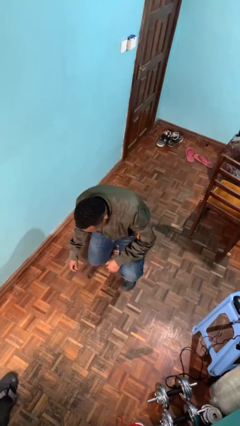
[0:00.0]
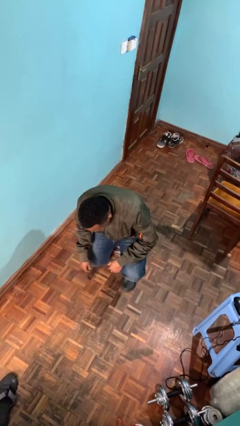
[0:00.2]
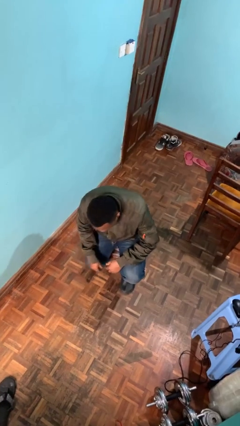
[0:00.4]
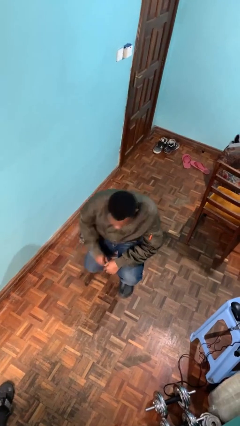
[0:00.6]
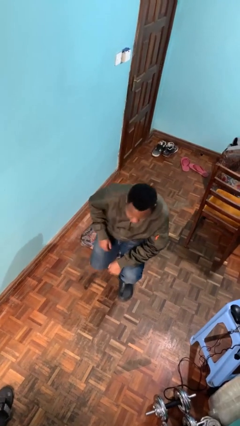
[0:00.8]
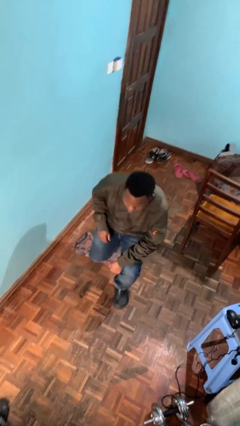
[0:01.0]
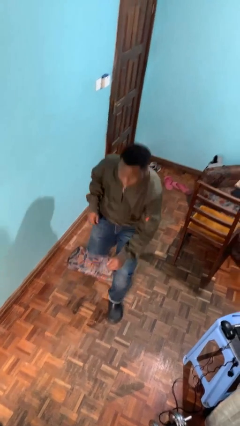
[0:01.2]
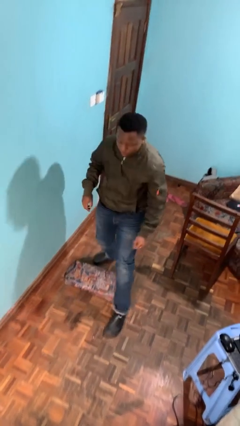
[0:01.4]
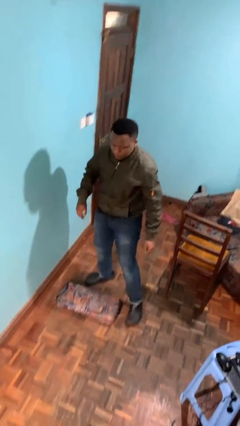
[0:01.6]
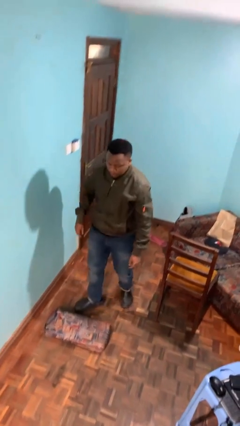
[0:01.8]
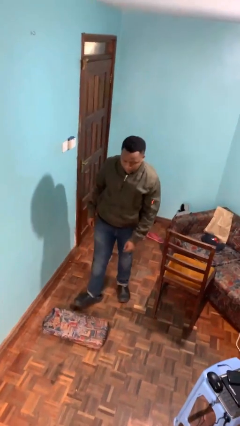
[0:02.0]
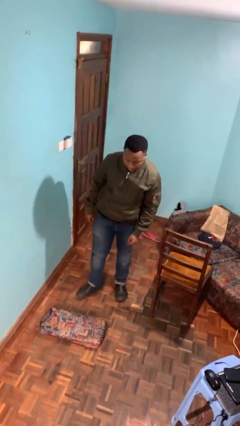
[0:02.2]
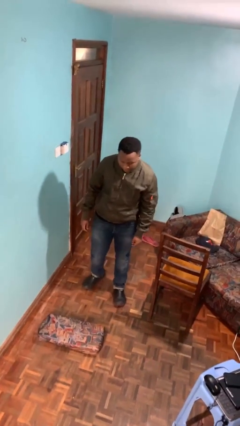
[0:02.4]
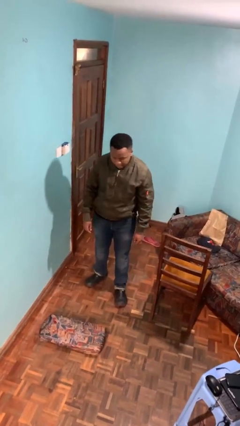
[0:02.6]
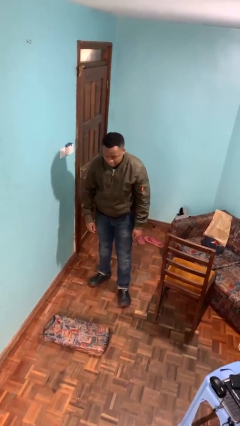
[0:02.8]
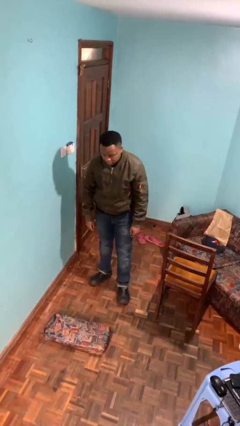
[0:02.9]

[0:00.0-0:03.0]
person stands up from floor

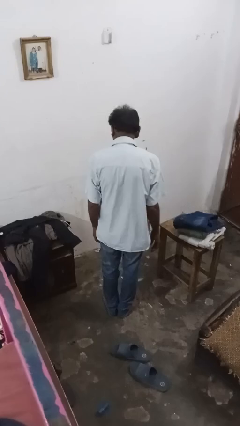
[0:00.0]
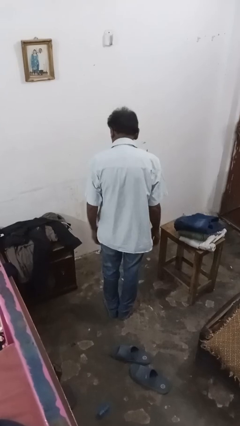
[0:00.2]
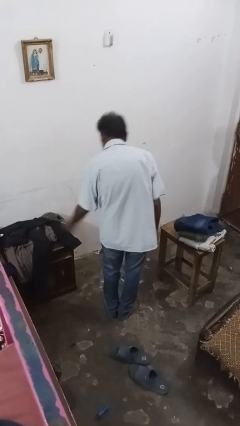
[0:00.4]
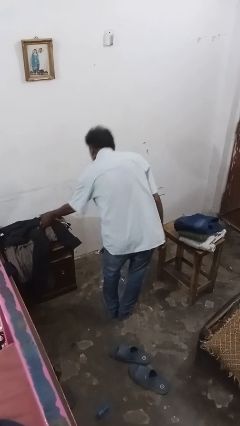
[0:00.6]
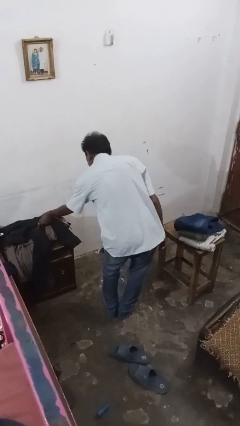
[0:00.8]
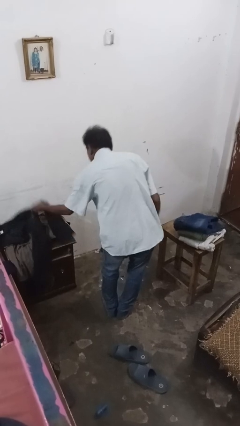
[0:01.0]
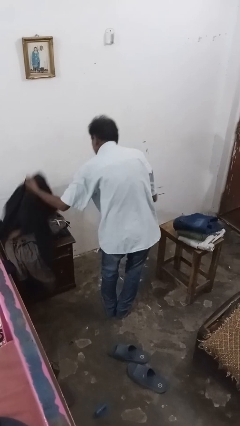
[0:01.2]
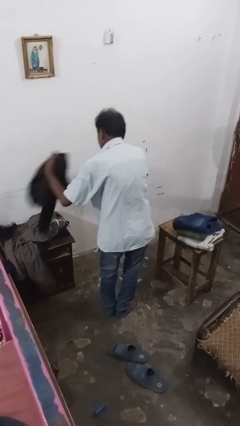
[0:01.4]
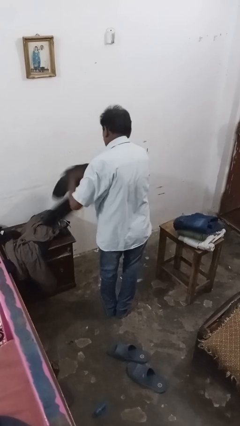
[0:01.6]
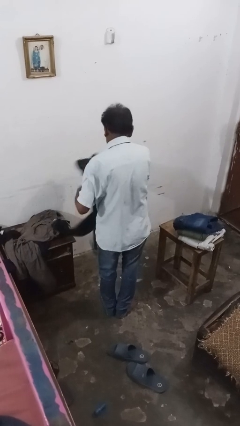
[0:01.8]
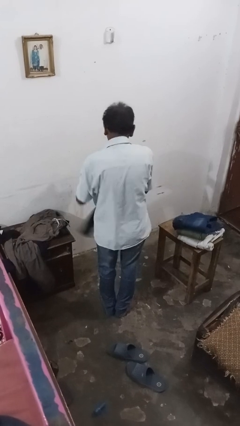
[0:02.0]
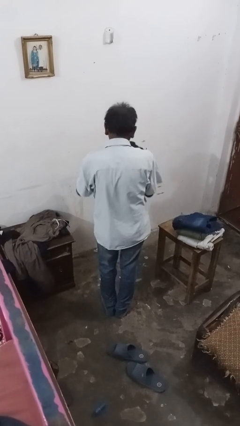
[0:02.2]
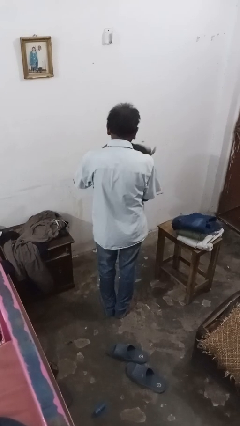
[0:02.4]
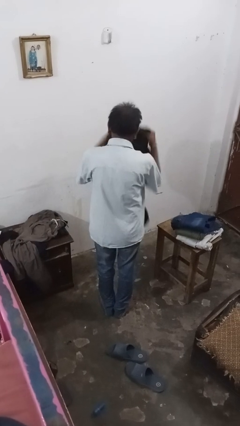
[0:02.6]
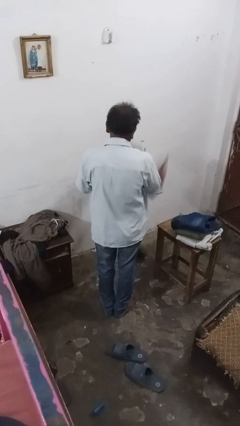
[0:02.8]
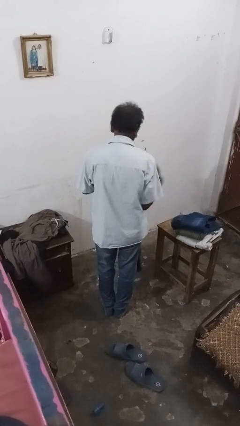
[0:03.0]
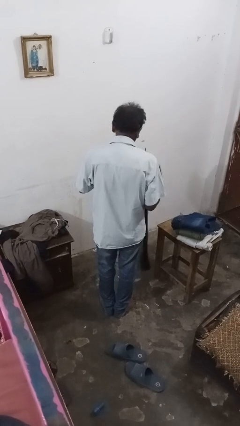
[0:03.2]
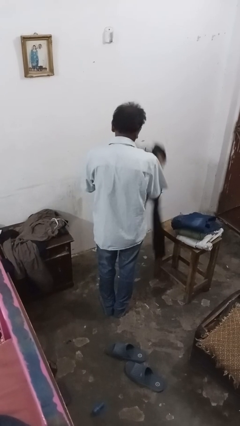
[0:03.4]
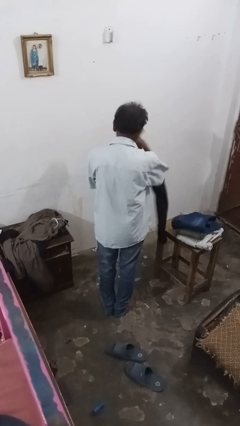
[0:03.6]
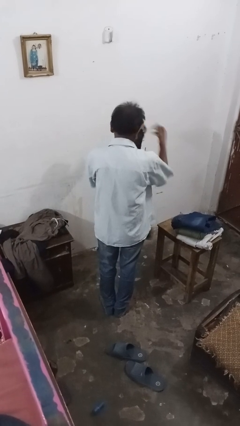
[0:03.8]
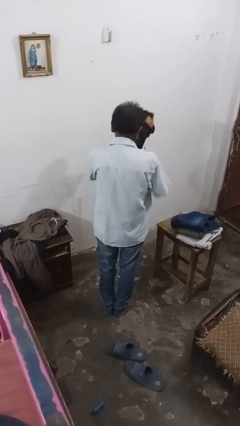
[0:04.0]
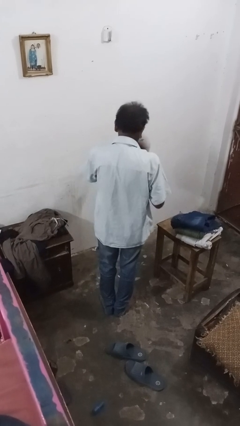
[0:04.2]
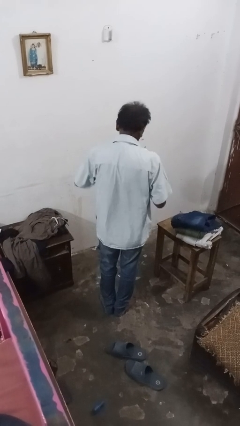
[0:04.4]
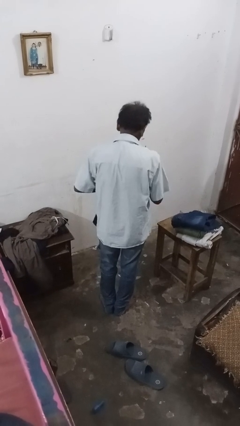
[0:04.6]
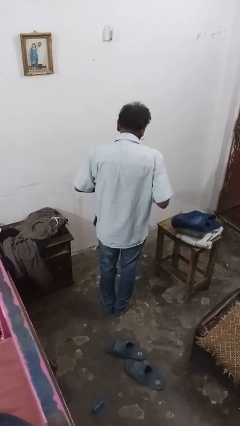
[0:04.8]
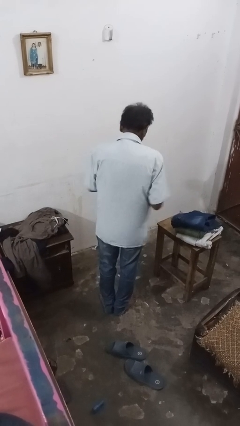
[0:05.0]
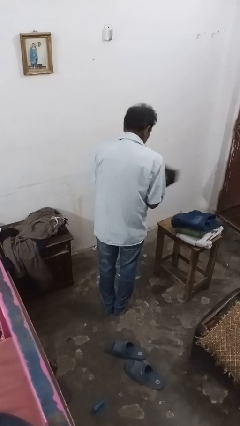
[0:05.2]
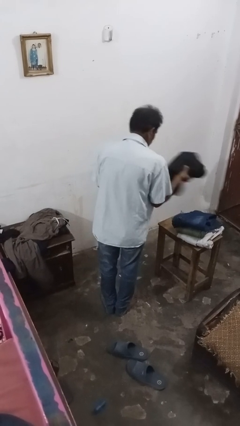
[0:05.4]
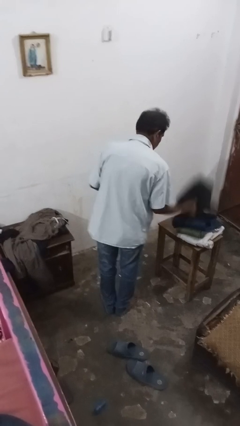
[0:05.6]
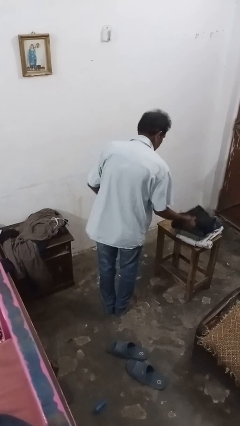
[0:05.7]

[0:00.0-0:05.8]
person folds pants

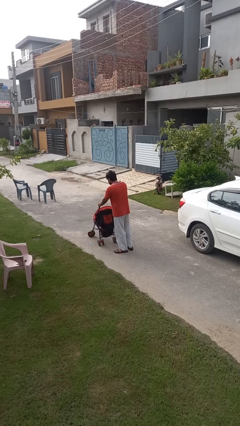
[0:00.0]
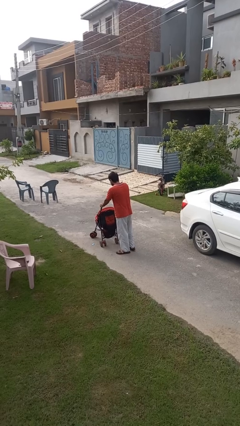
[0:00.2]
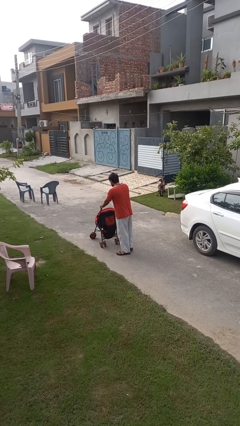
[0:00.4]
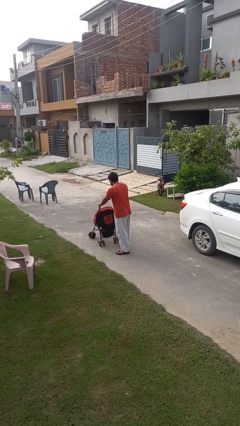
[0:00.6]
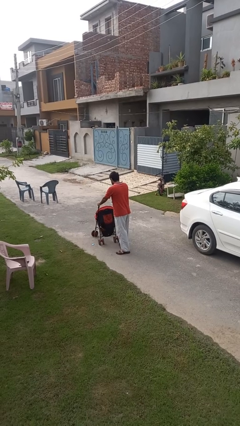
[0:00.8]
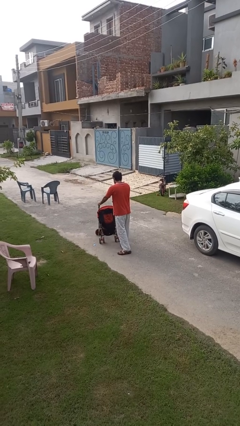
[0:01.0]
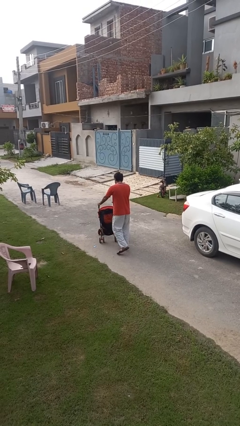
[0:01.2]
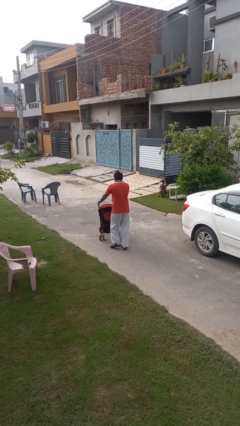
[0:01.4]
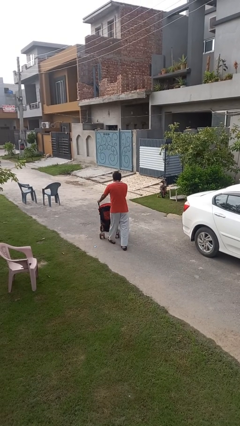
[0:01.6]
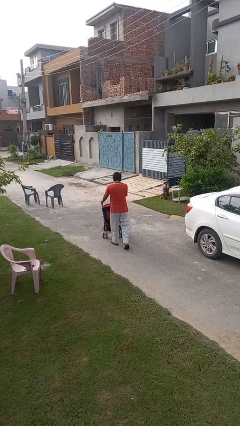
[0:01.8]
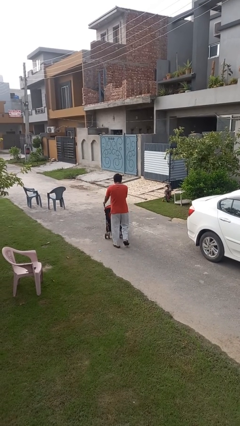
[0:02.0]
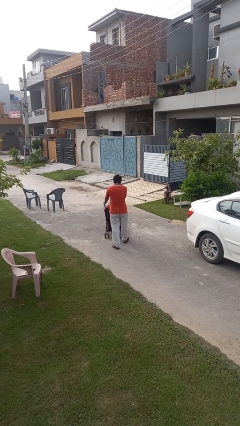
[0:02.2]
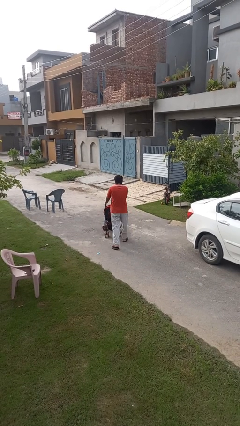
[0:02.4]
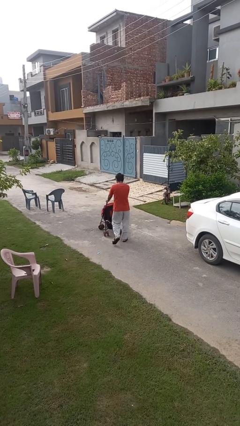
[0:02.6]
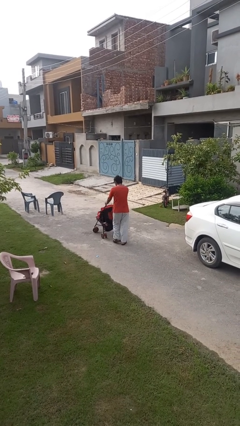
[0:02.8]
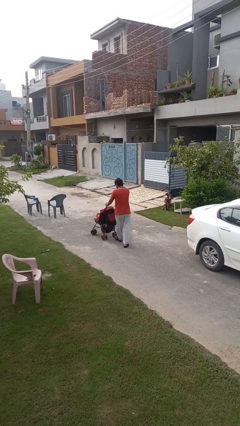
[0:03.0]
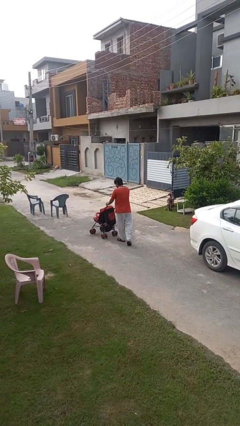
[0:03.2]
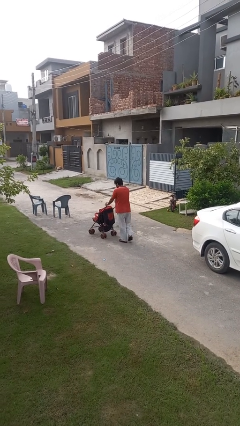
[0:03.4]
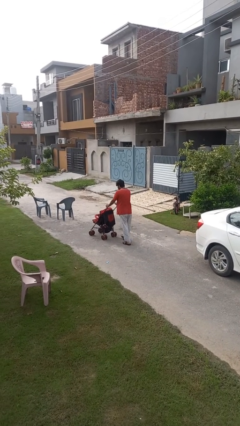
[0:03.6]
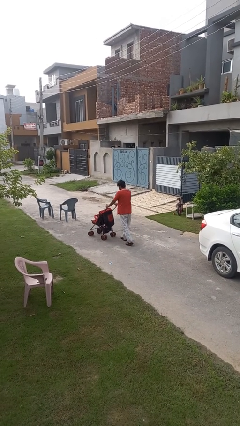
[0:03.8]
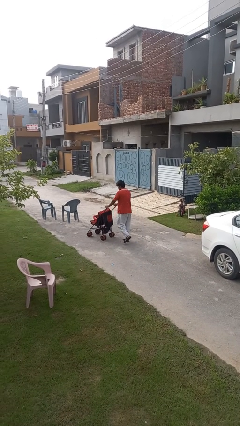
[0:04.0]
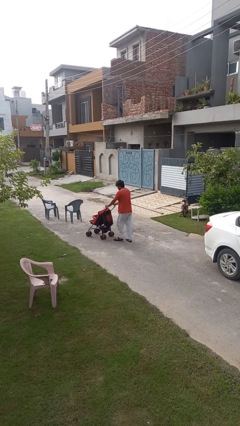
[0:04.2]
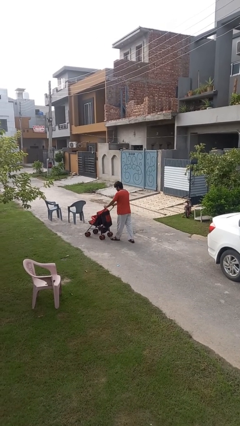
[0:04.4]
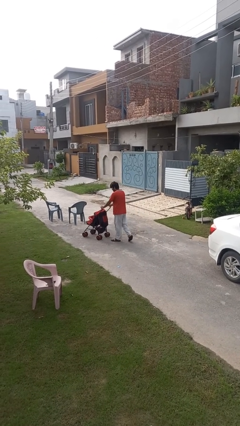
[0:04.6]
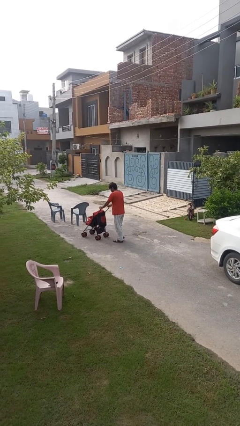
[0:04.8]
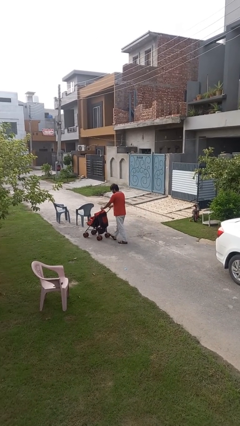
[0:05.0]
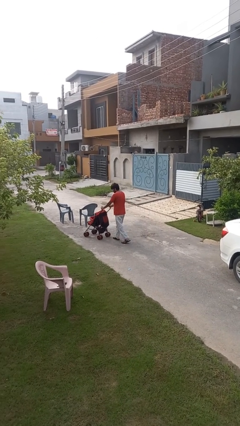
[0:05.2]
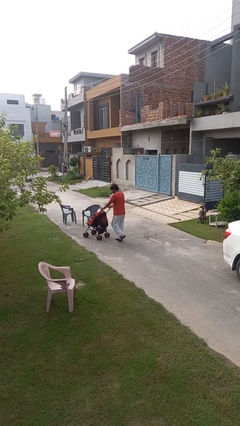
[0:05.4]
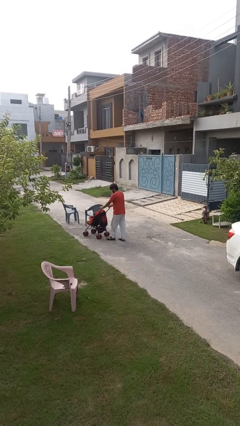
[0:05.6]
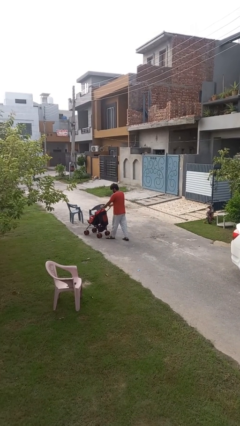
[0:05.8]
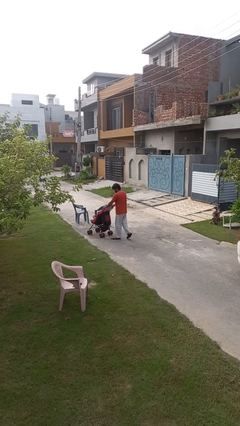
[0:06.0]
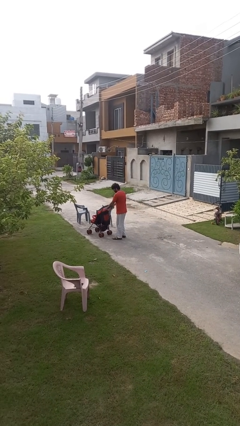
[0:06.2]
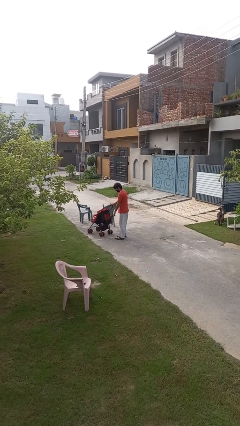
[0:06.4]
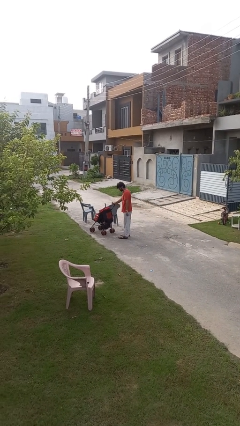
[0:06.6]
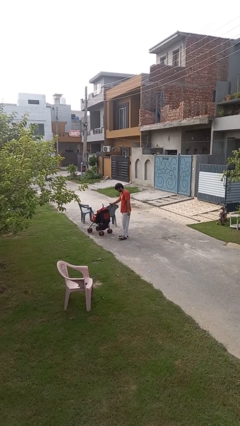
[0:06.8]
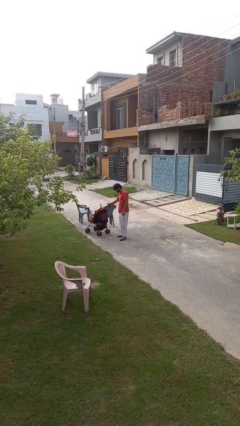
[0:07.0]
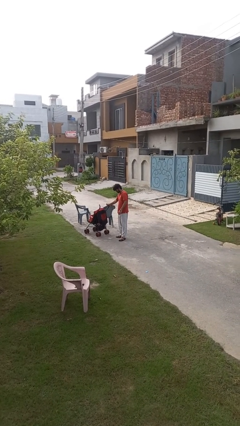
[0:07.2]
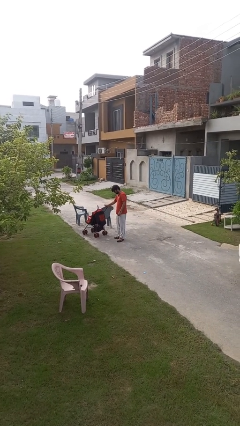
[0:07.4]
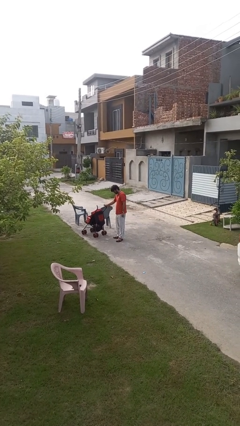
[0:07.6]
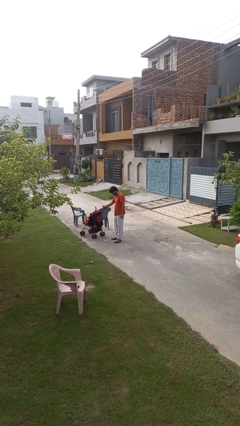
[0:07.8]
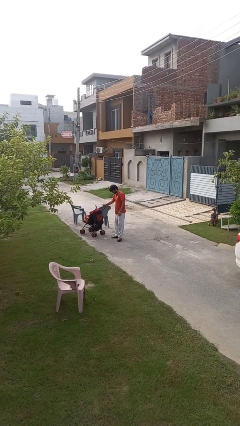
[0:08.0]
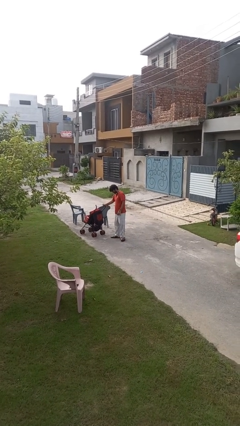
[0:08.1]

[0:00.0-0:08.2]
person pushes wheeled cart

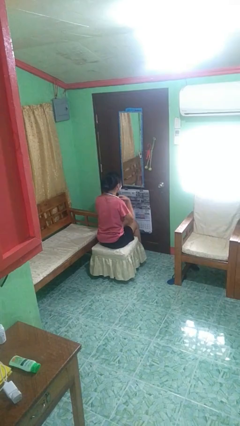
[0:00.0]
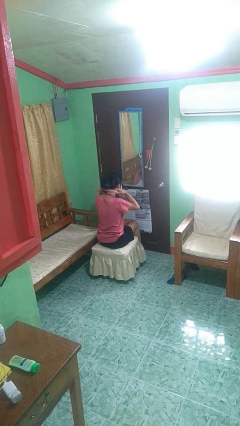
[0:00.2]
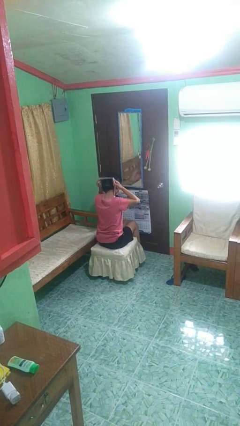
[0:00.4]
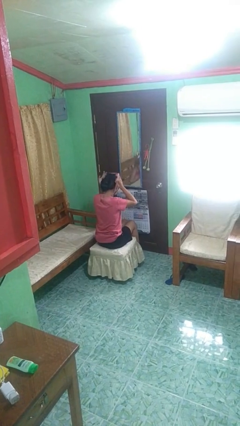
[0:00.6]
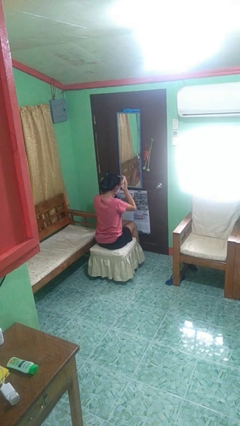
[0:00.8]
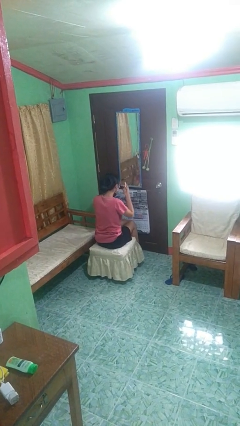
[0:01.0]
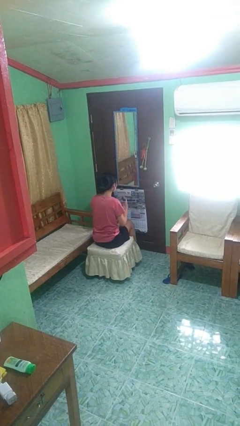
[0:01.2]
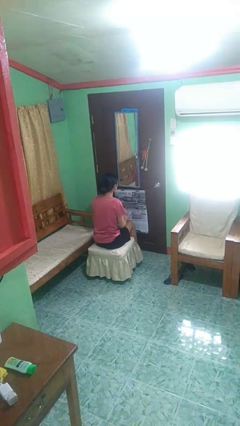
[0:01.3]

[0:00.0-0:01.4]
person takes off necklace
